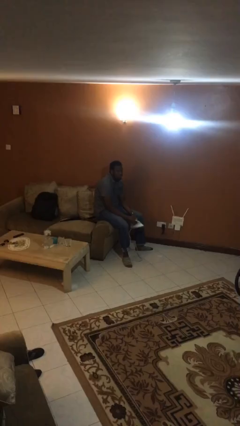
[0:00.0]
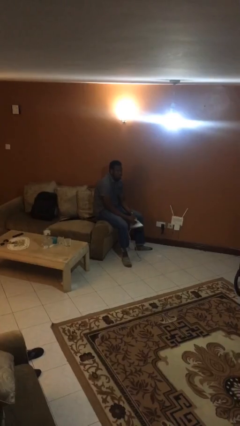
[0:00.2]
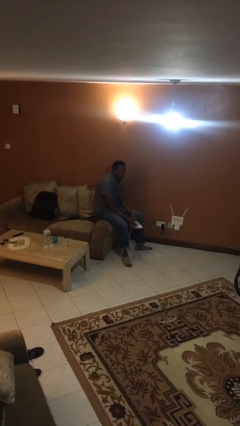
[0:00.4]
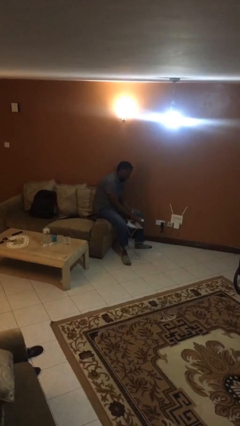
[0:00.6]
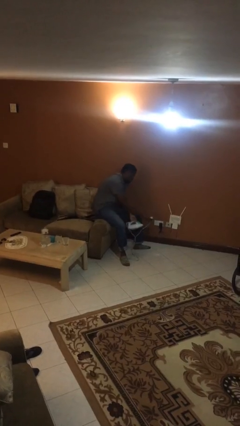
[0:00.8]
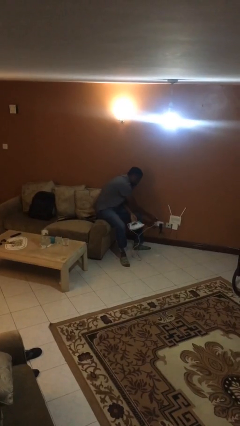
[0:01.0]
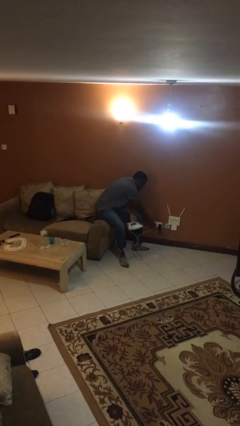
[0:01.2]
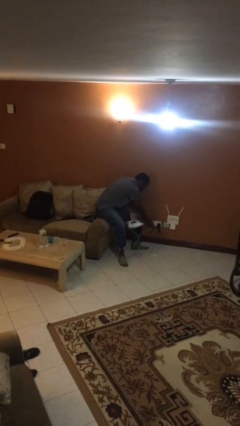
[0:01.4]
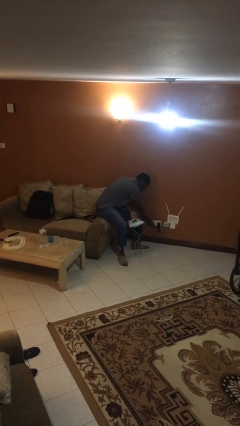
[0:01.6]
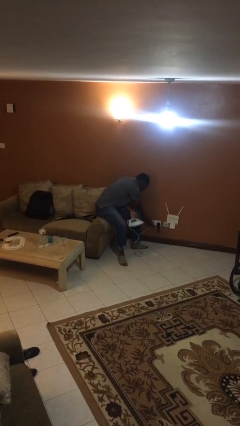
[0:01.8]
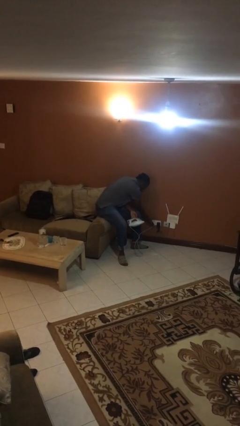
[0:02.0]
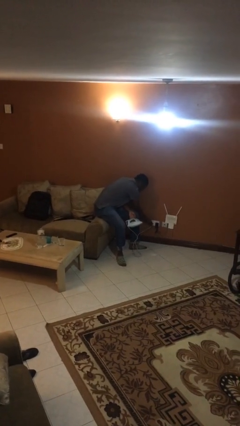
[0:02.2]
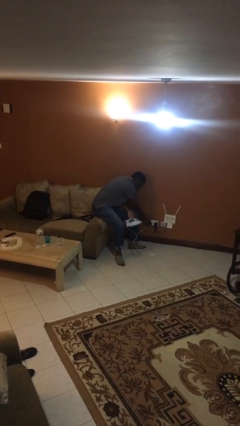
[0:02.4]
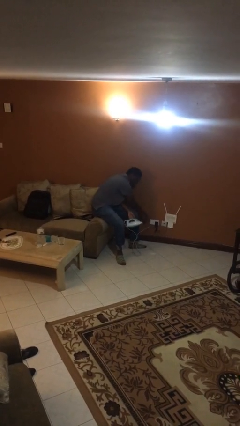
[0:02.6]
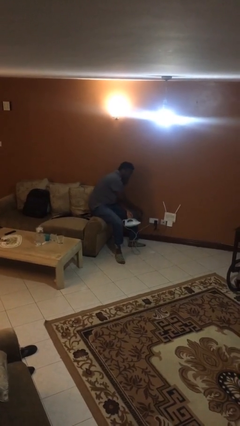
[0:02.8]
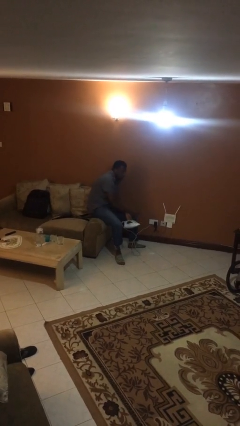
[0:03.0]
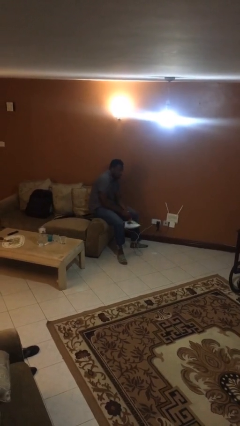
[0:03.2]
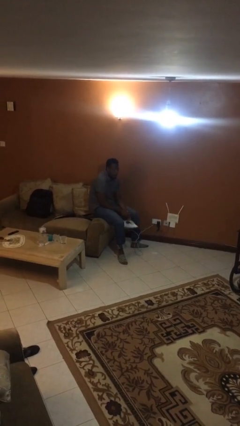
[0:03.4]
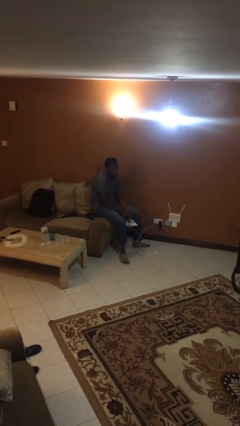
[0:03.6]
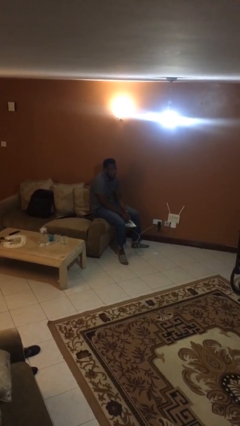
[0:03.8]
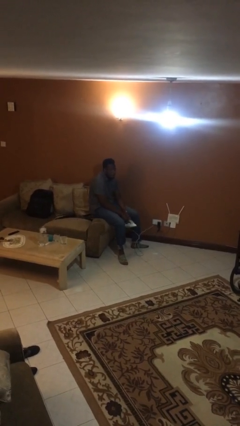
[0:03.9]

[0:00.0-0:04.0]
person plugs into electrical socket

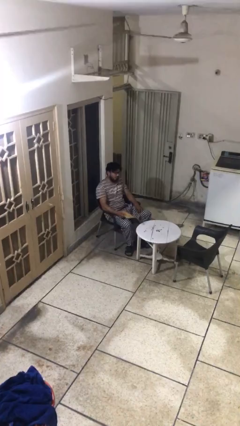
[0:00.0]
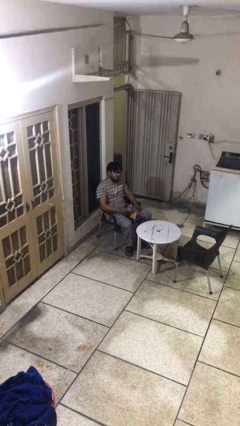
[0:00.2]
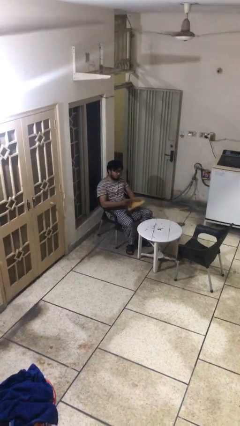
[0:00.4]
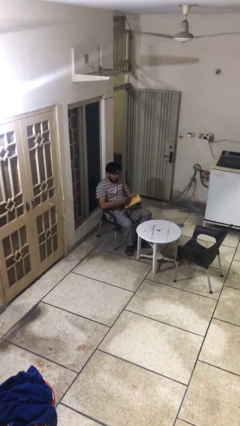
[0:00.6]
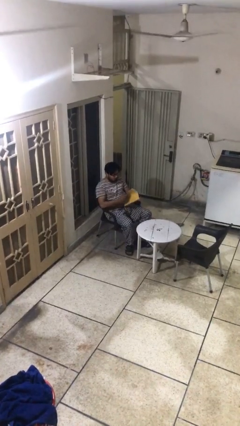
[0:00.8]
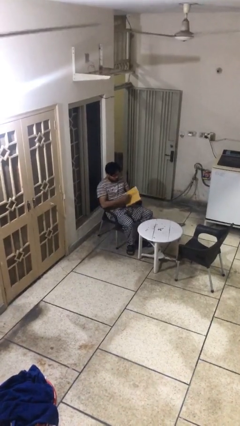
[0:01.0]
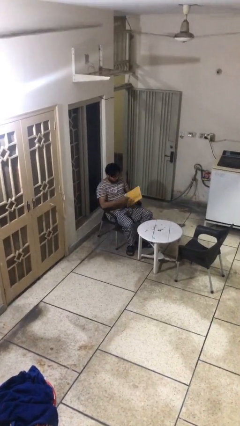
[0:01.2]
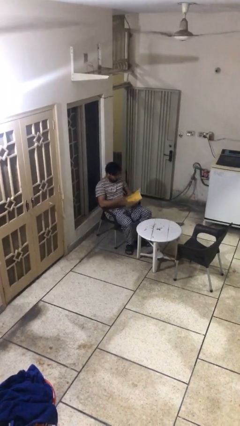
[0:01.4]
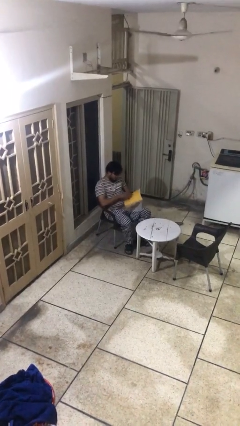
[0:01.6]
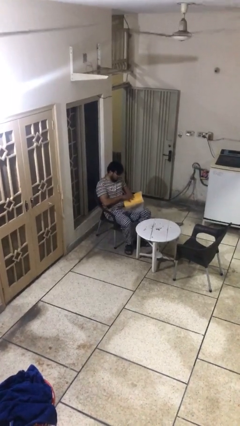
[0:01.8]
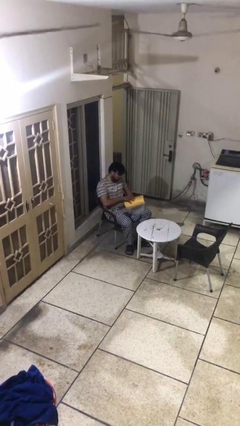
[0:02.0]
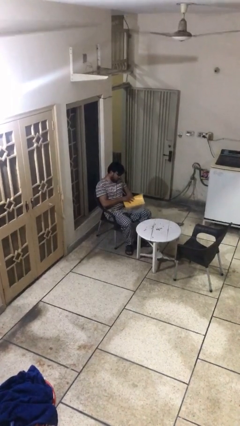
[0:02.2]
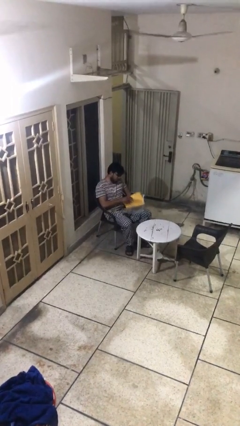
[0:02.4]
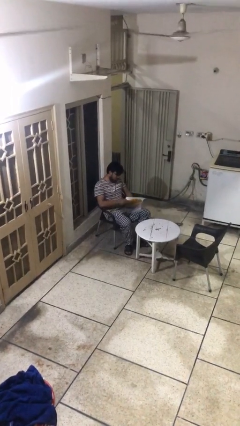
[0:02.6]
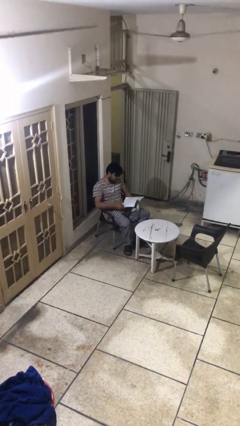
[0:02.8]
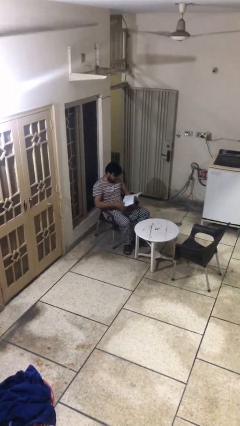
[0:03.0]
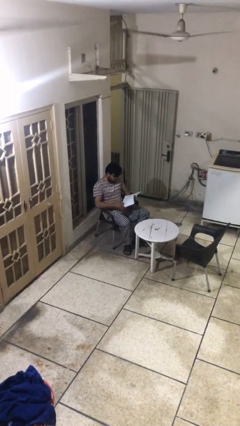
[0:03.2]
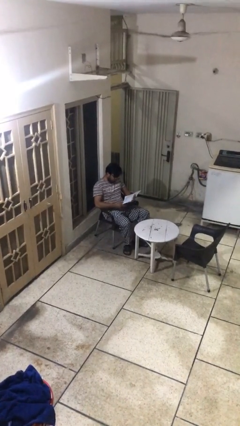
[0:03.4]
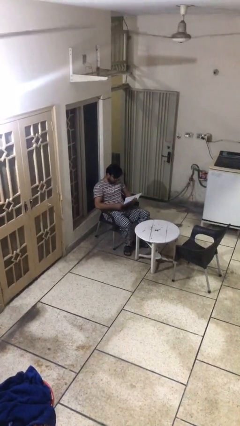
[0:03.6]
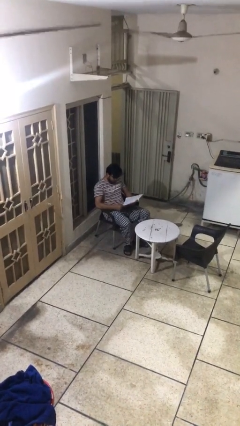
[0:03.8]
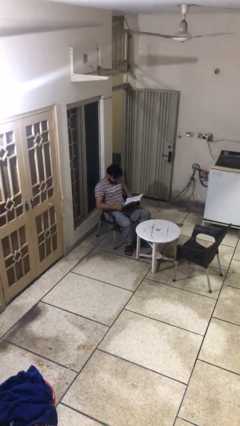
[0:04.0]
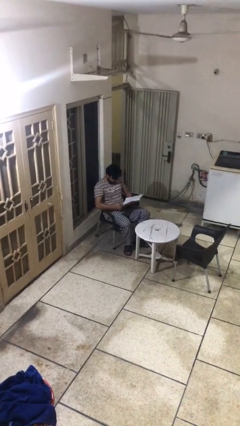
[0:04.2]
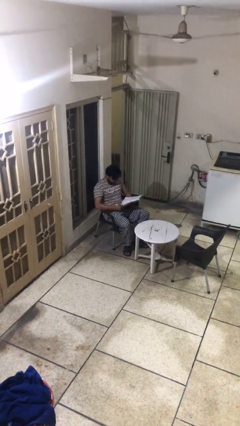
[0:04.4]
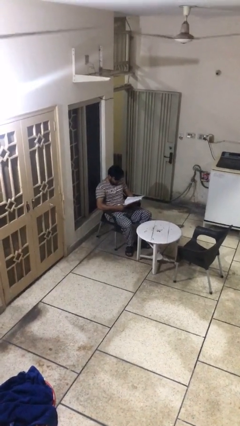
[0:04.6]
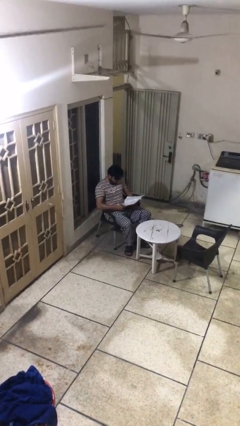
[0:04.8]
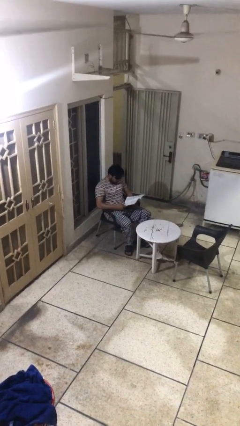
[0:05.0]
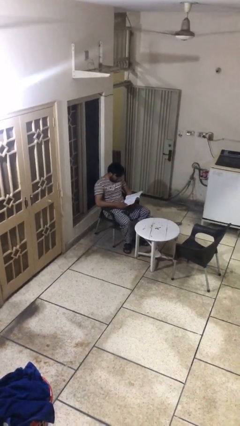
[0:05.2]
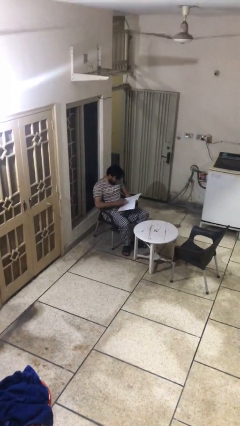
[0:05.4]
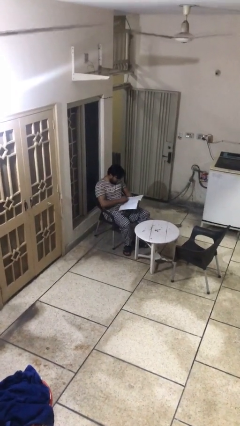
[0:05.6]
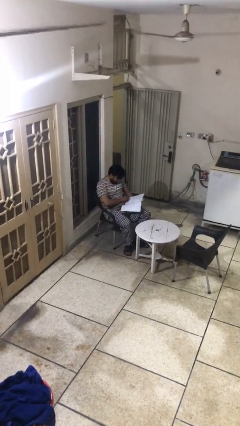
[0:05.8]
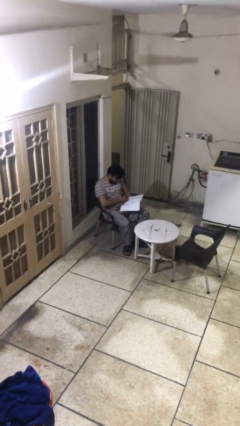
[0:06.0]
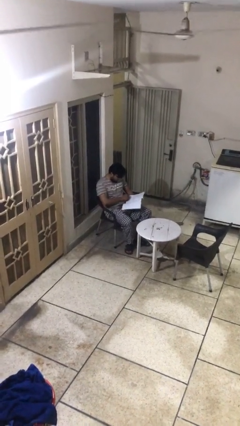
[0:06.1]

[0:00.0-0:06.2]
person reads document

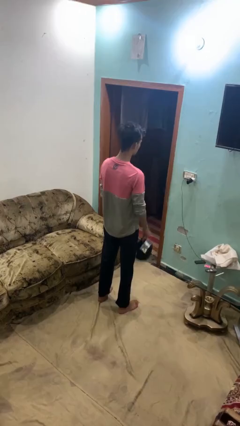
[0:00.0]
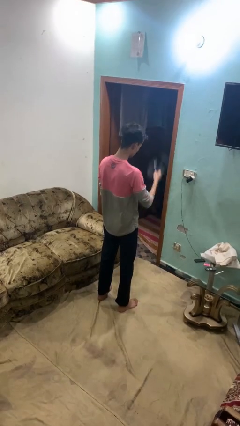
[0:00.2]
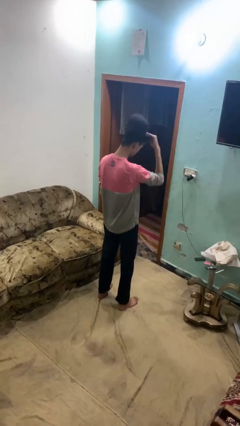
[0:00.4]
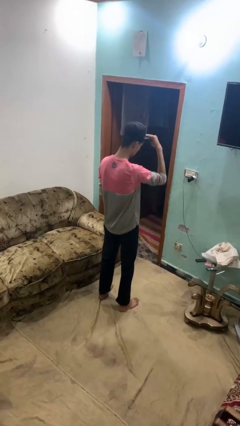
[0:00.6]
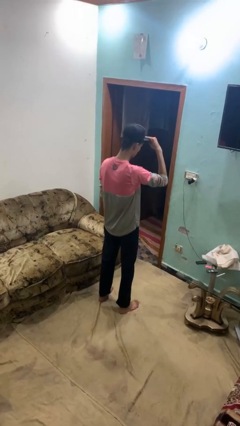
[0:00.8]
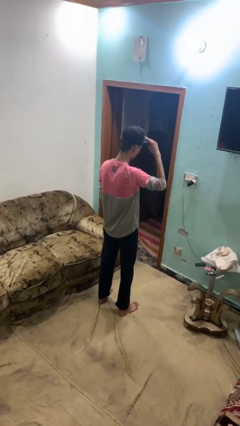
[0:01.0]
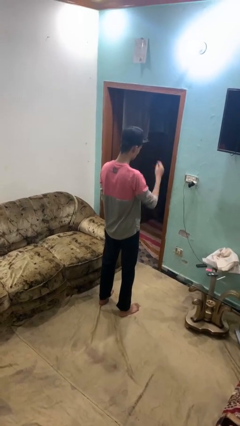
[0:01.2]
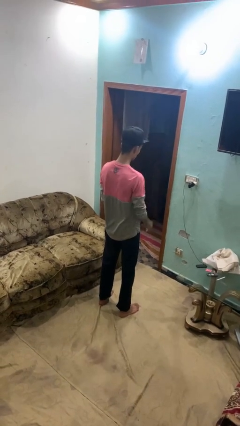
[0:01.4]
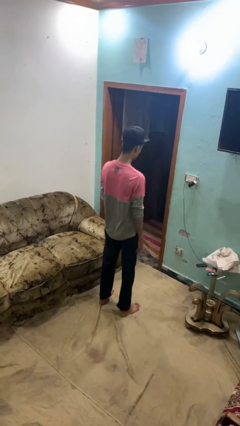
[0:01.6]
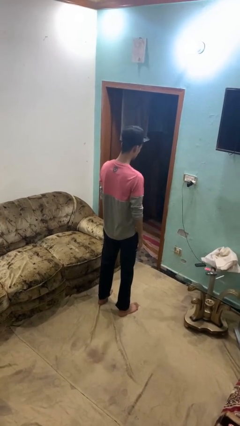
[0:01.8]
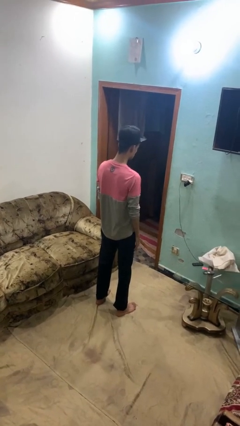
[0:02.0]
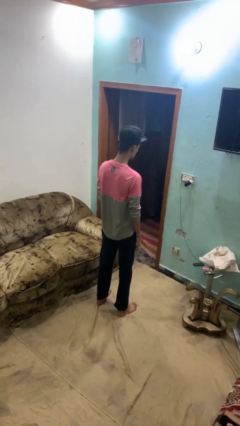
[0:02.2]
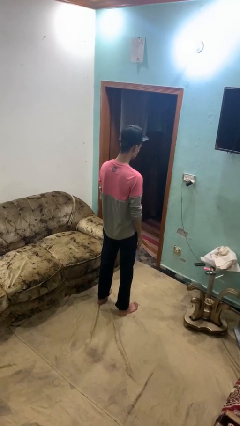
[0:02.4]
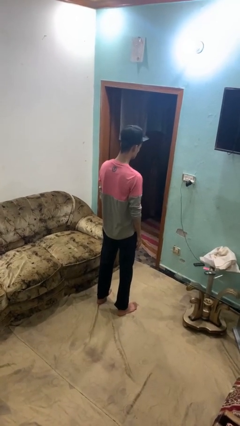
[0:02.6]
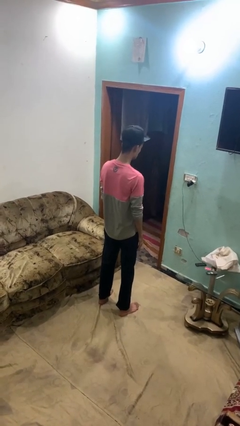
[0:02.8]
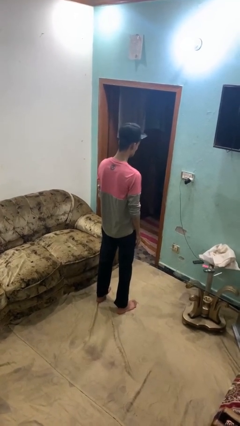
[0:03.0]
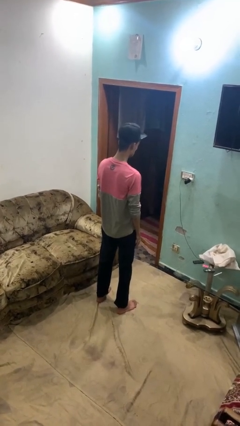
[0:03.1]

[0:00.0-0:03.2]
person puts on hat

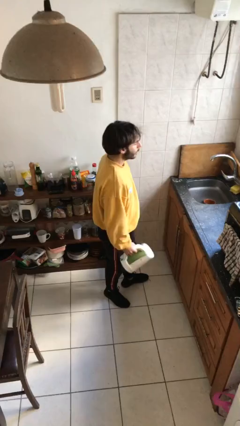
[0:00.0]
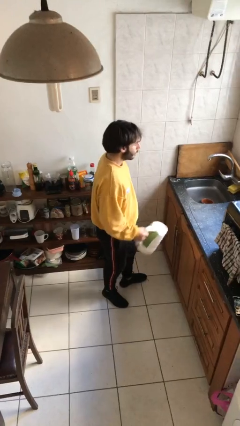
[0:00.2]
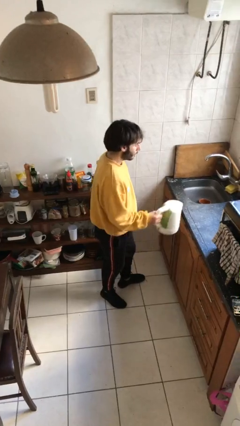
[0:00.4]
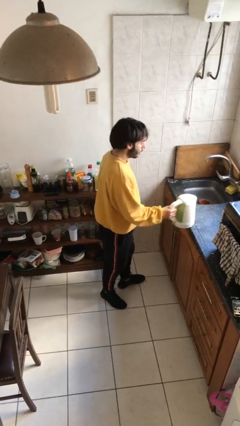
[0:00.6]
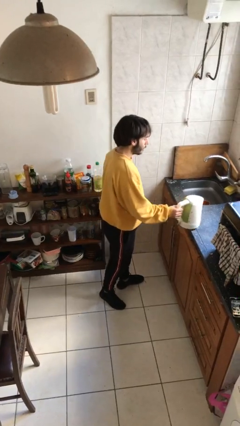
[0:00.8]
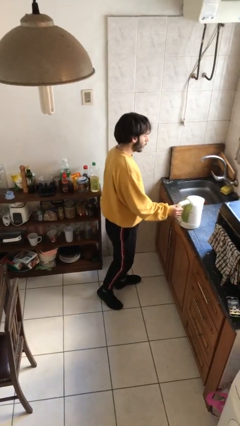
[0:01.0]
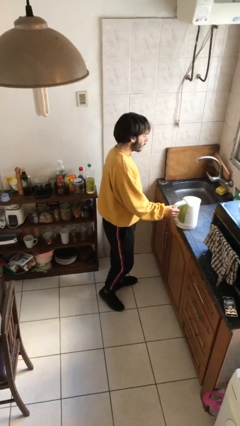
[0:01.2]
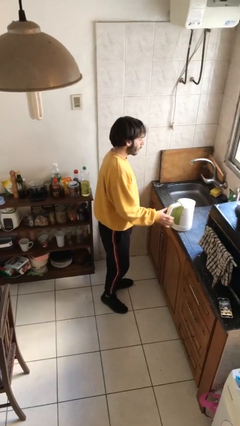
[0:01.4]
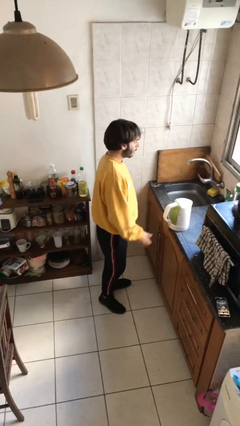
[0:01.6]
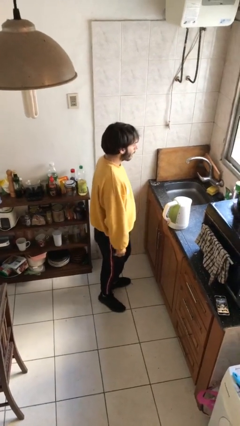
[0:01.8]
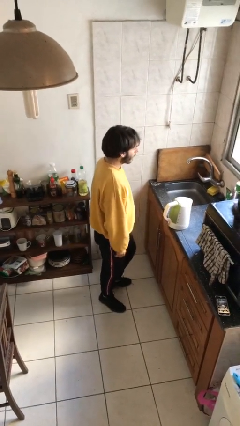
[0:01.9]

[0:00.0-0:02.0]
person puts down object on countertop

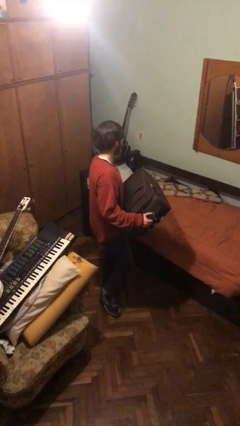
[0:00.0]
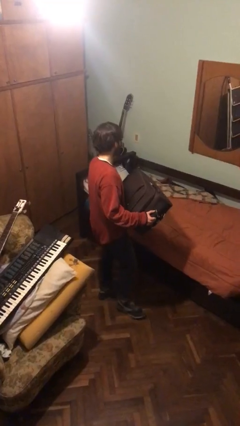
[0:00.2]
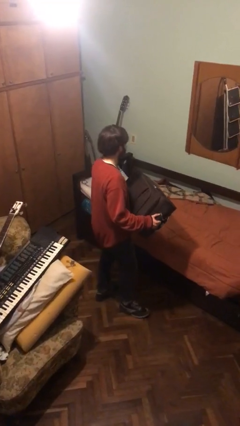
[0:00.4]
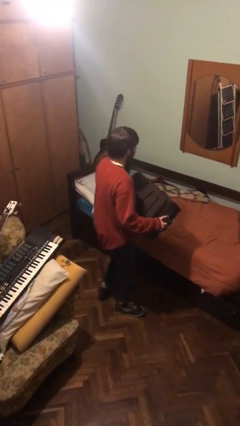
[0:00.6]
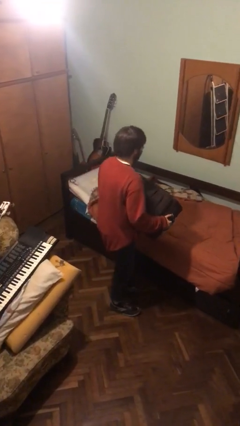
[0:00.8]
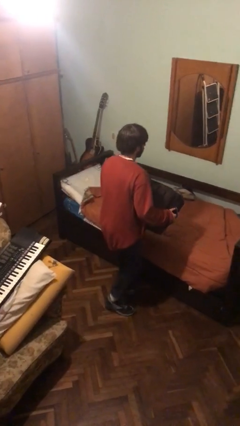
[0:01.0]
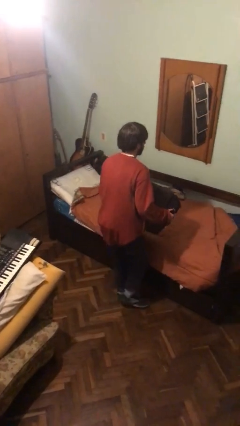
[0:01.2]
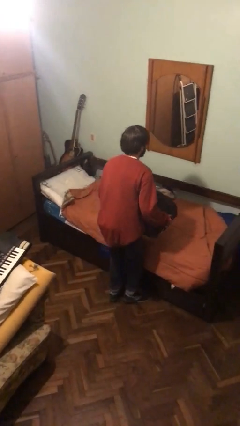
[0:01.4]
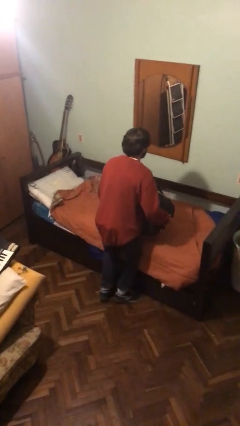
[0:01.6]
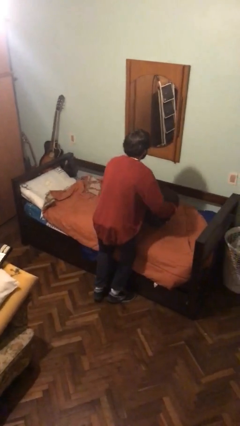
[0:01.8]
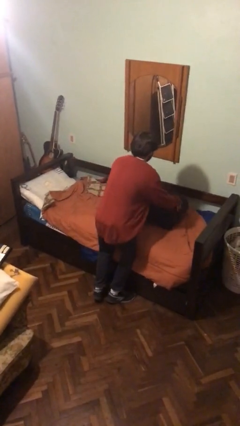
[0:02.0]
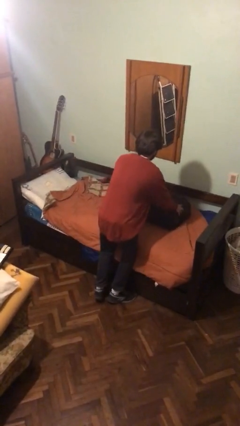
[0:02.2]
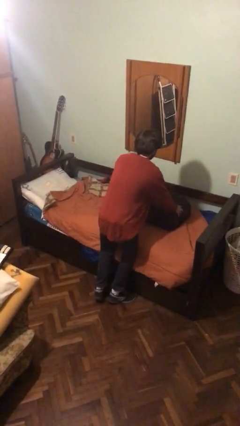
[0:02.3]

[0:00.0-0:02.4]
person puts down object on bed
